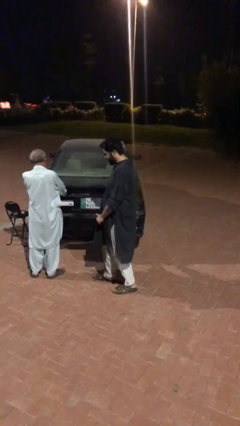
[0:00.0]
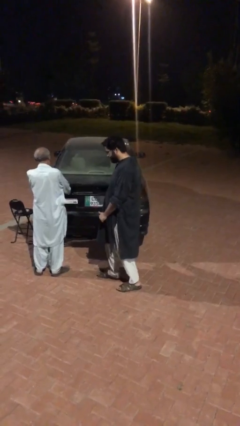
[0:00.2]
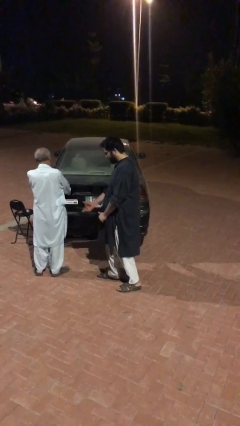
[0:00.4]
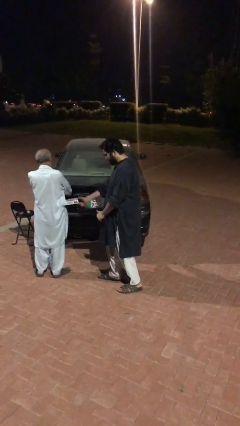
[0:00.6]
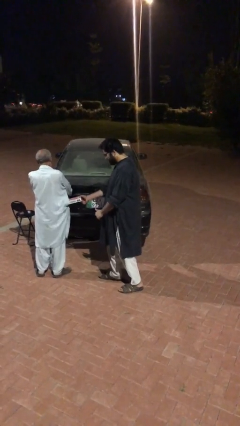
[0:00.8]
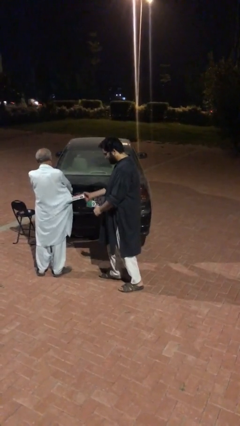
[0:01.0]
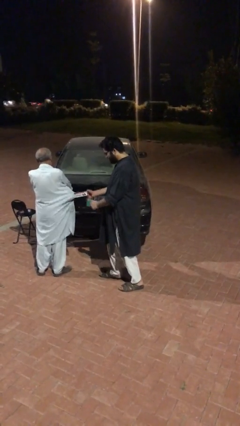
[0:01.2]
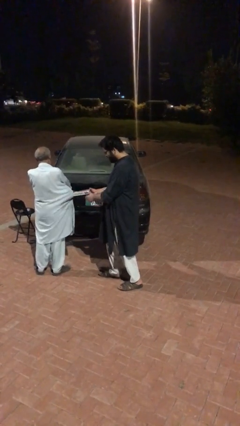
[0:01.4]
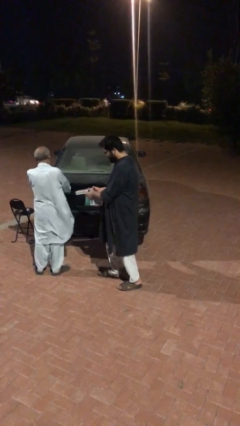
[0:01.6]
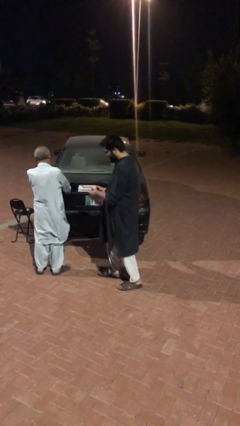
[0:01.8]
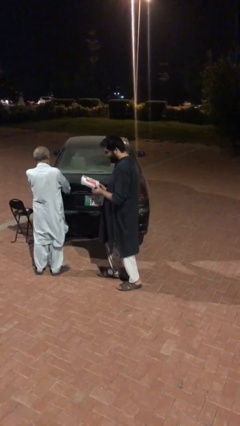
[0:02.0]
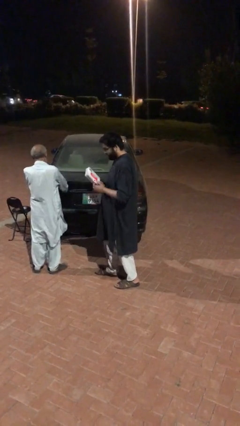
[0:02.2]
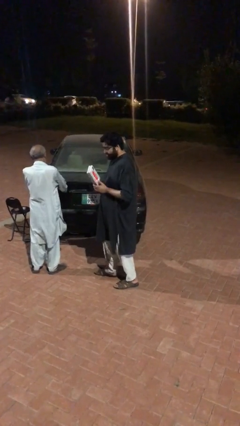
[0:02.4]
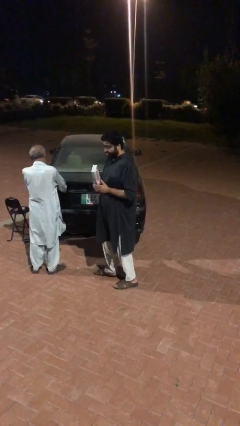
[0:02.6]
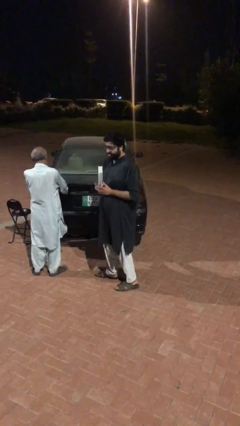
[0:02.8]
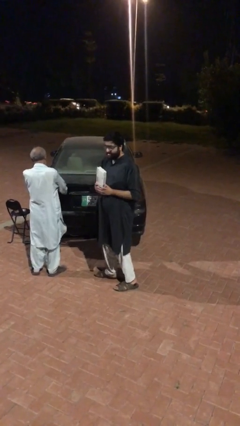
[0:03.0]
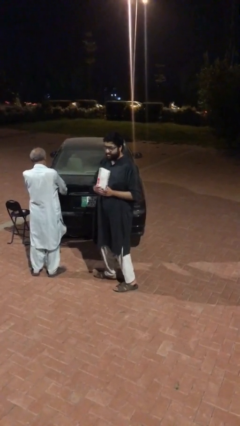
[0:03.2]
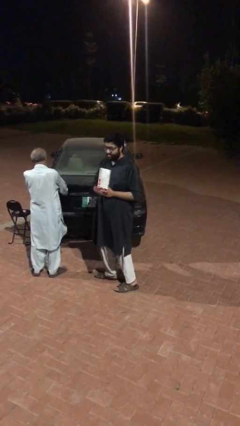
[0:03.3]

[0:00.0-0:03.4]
person steals object from person

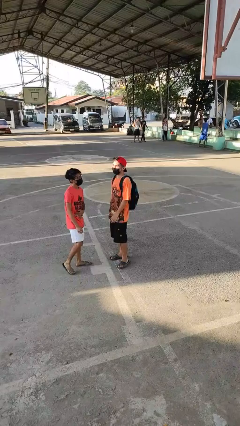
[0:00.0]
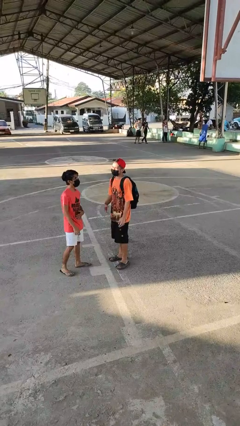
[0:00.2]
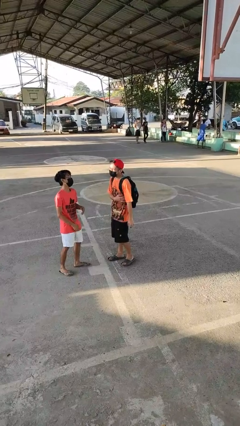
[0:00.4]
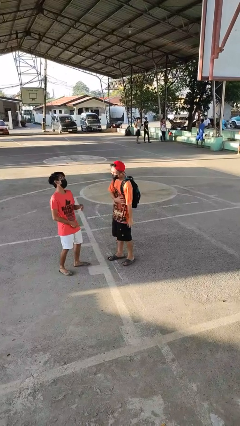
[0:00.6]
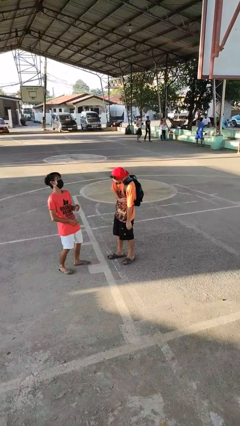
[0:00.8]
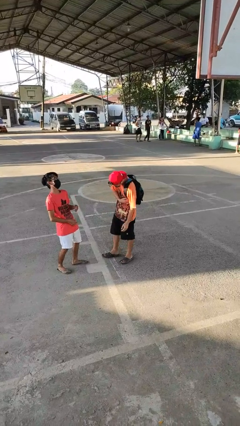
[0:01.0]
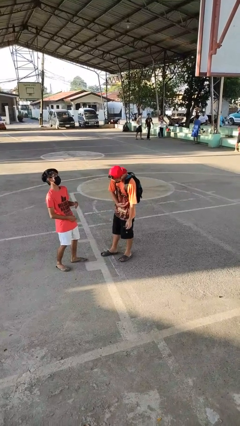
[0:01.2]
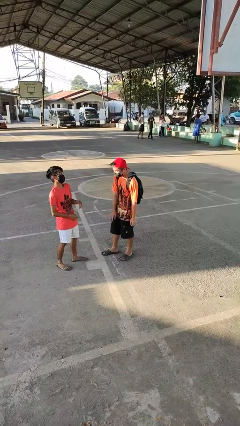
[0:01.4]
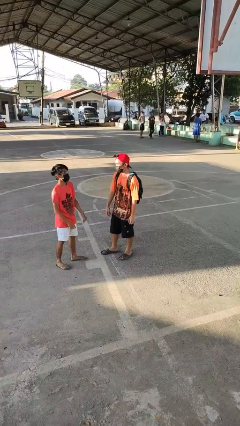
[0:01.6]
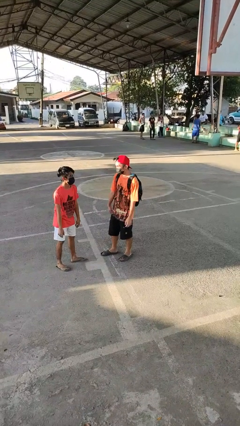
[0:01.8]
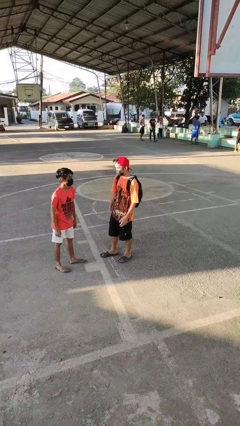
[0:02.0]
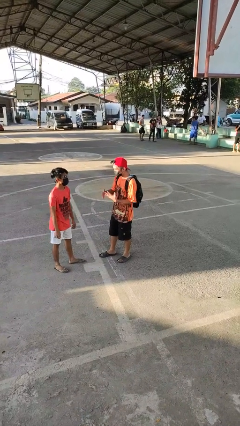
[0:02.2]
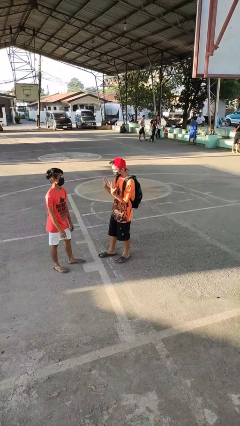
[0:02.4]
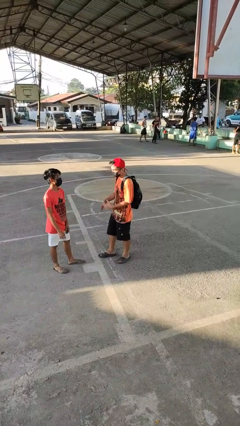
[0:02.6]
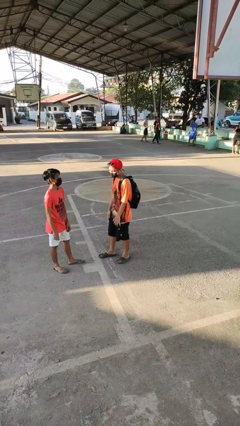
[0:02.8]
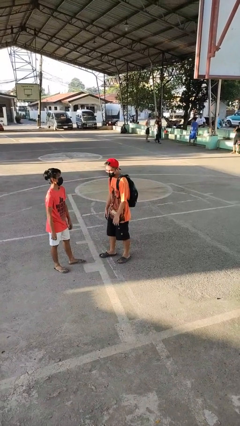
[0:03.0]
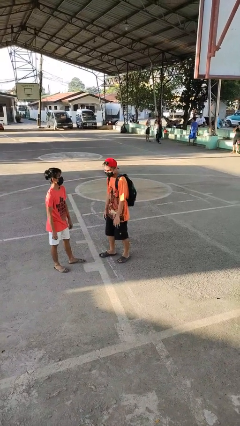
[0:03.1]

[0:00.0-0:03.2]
person laughs with person

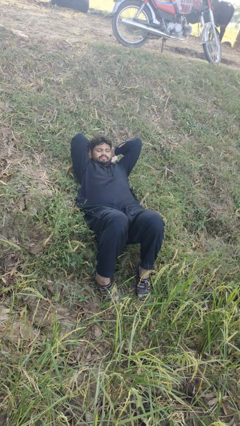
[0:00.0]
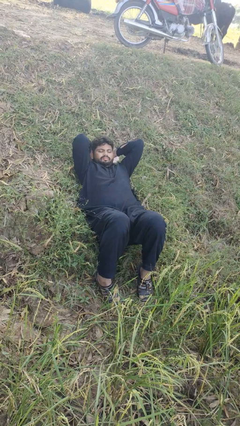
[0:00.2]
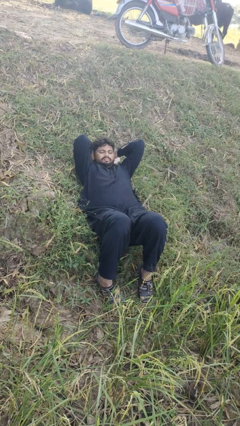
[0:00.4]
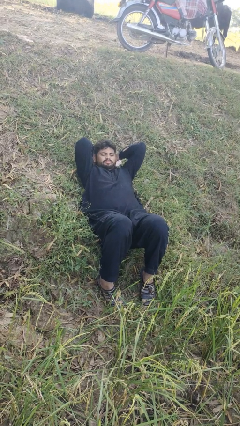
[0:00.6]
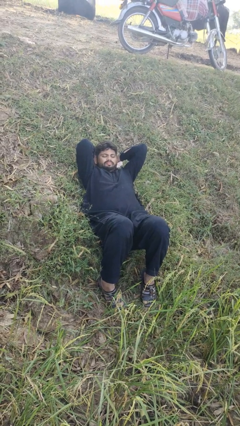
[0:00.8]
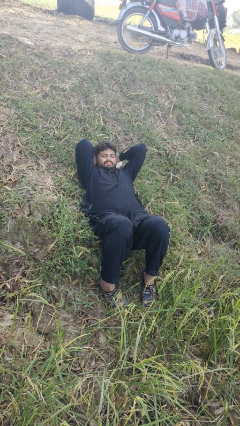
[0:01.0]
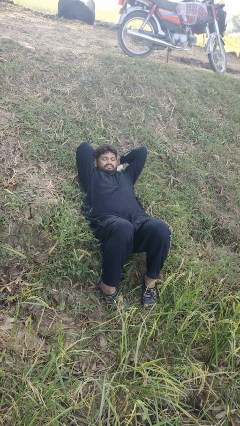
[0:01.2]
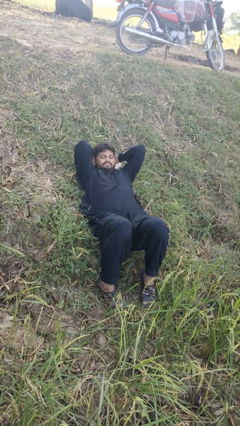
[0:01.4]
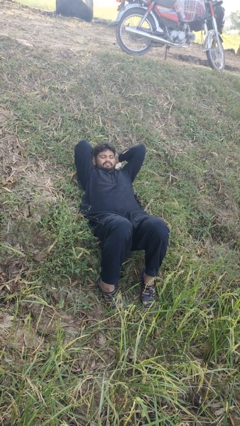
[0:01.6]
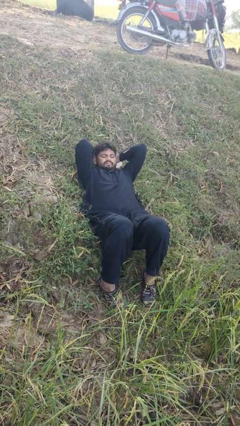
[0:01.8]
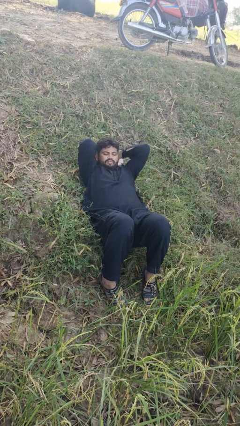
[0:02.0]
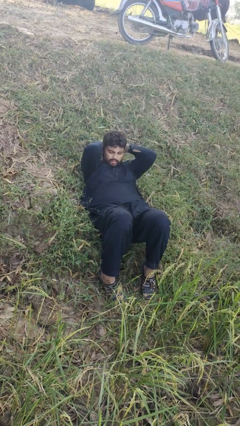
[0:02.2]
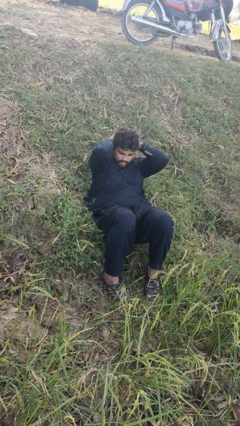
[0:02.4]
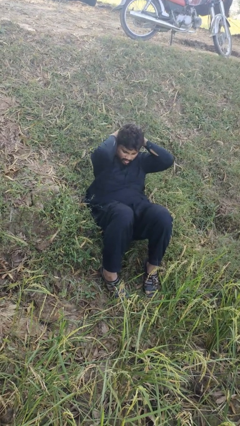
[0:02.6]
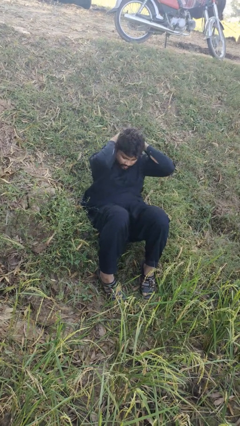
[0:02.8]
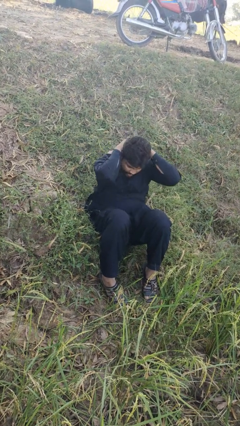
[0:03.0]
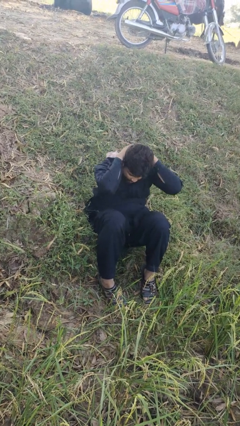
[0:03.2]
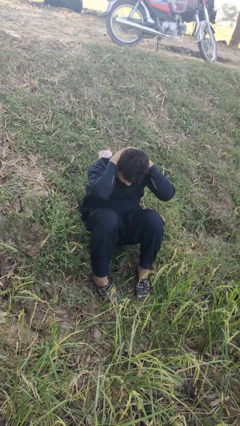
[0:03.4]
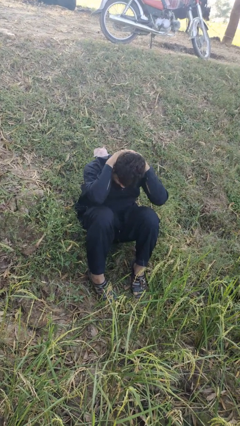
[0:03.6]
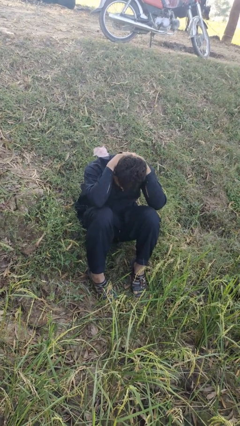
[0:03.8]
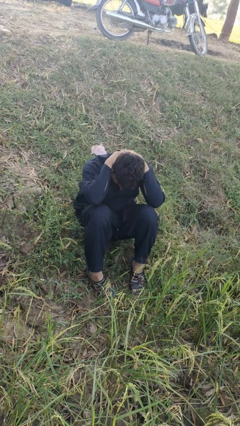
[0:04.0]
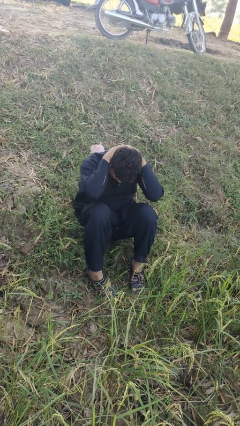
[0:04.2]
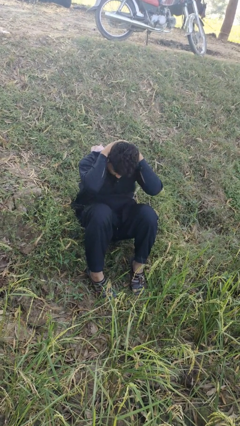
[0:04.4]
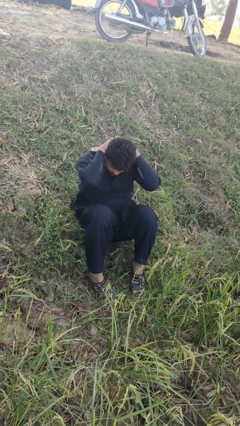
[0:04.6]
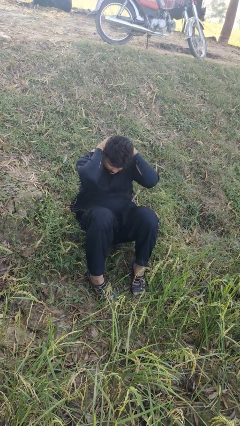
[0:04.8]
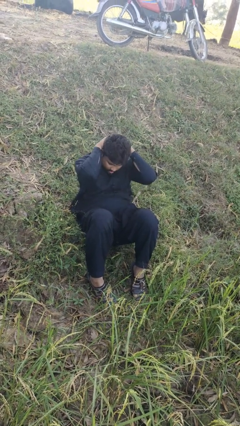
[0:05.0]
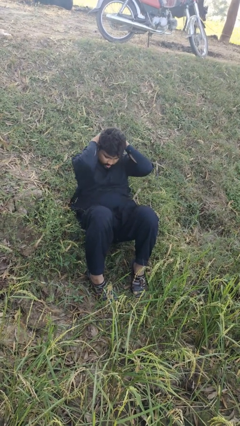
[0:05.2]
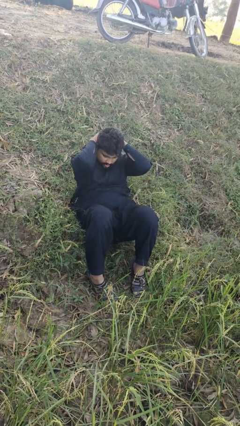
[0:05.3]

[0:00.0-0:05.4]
person exercises with situp

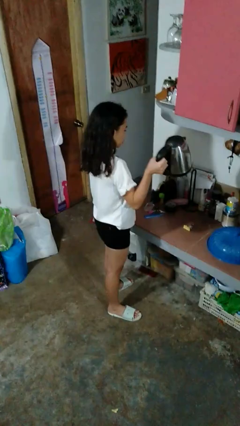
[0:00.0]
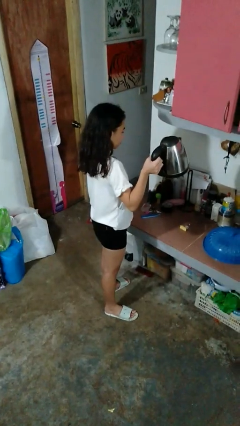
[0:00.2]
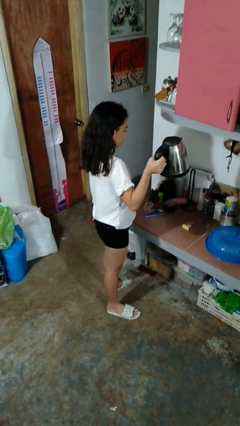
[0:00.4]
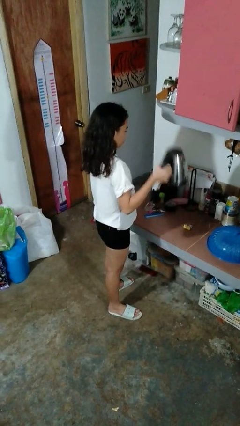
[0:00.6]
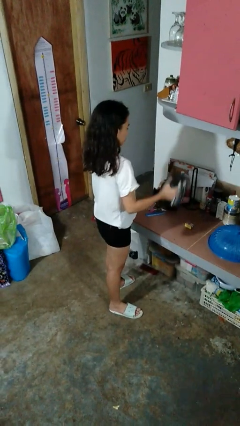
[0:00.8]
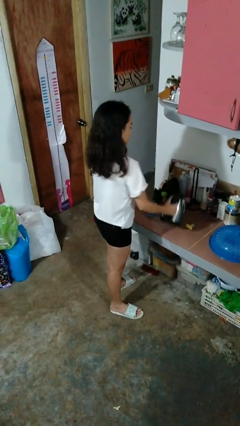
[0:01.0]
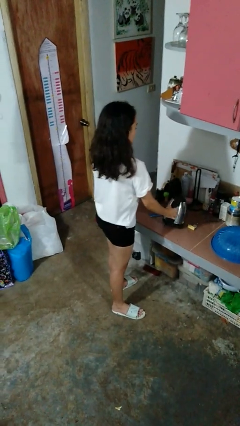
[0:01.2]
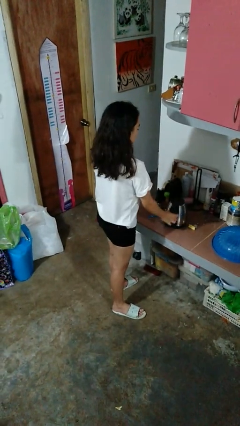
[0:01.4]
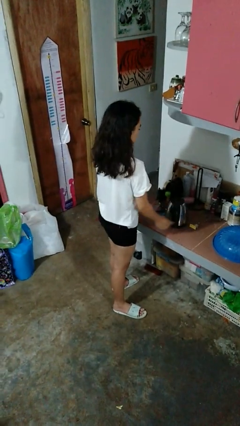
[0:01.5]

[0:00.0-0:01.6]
person puts down object on countertop

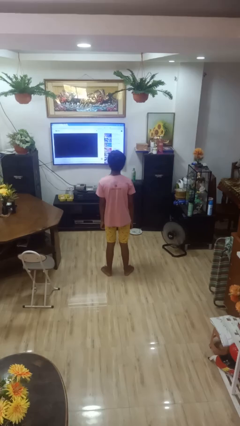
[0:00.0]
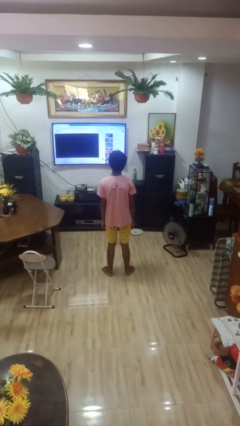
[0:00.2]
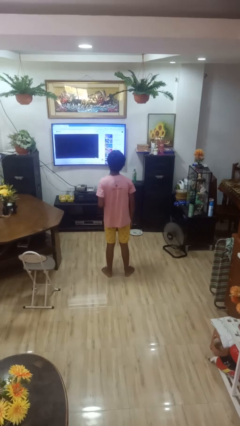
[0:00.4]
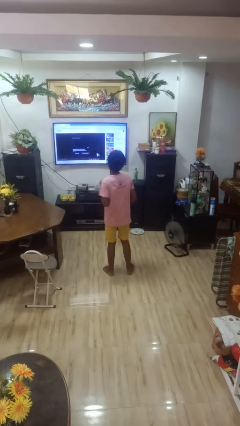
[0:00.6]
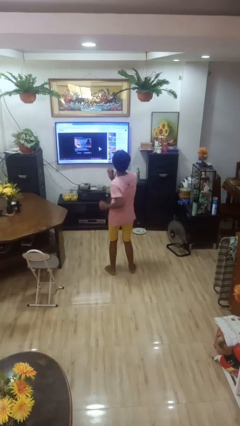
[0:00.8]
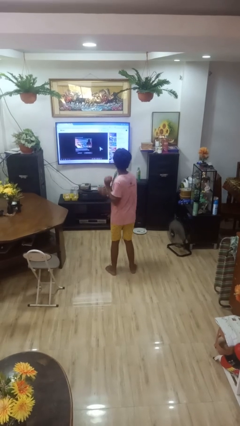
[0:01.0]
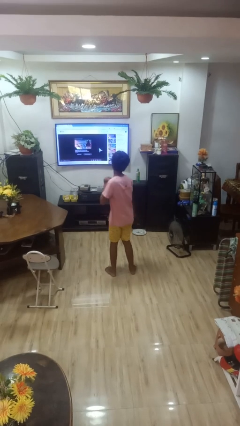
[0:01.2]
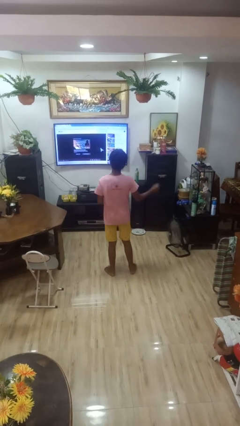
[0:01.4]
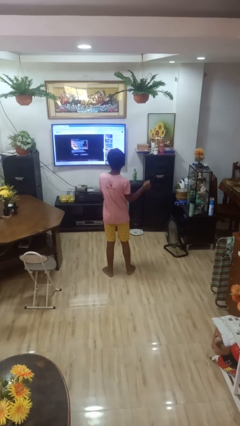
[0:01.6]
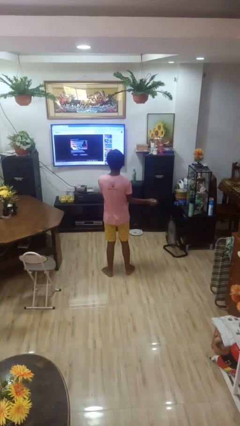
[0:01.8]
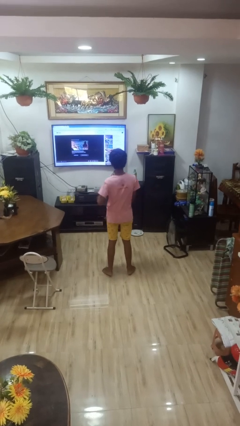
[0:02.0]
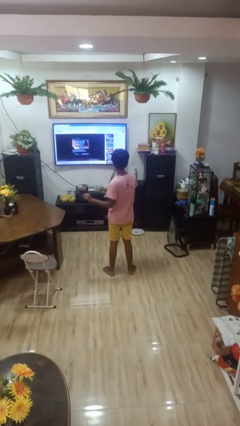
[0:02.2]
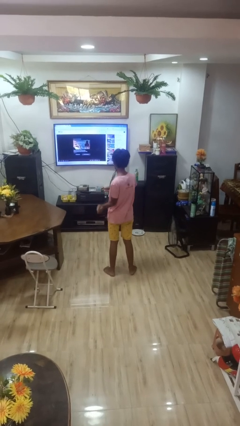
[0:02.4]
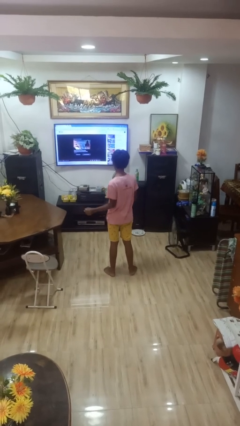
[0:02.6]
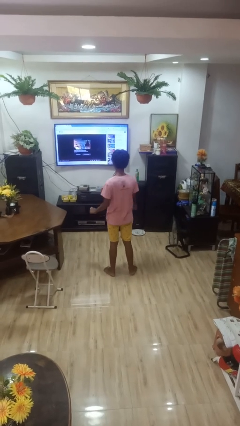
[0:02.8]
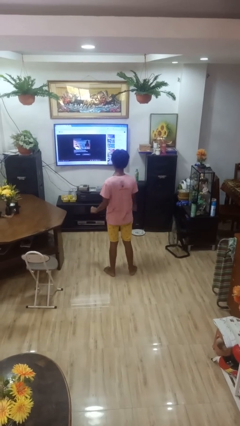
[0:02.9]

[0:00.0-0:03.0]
person dances in place

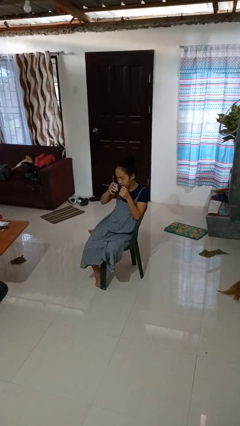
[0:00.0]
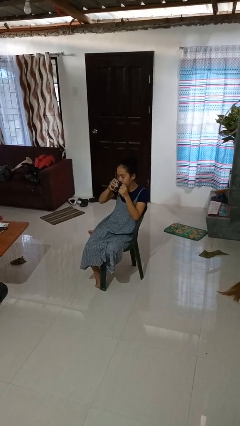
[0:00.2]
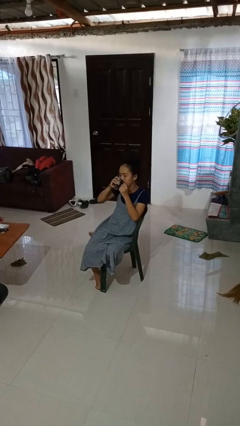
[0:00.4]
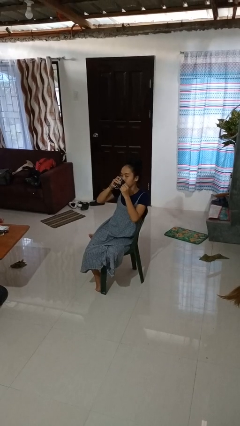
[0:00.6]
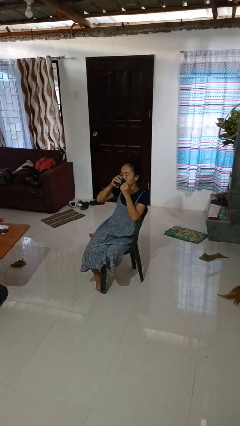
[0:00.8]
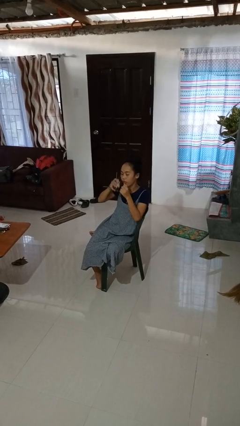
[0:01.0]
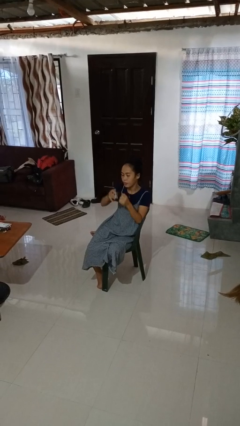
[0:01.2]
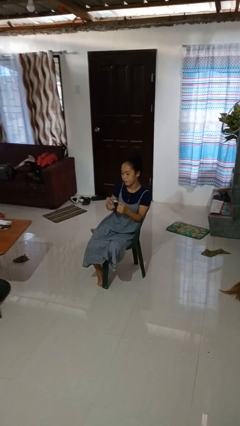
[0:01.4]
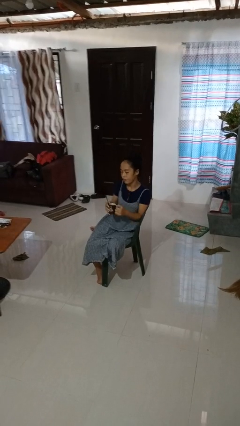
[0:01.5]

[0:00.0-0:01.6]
person drinks from mug
